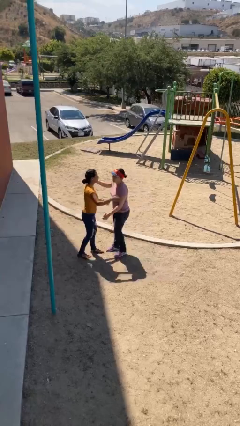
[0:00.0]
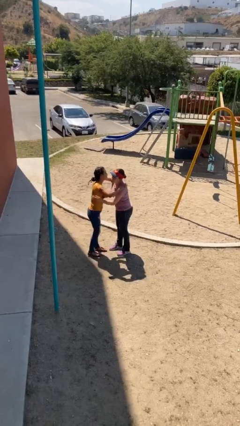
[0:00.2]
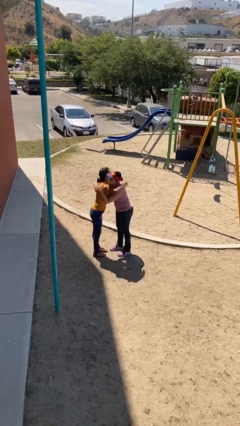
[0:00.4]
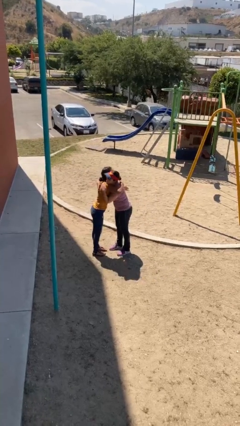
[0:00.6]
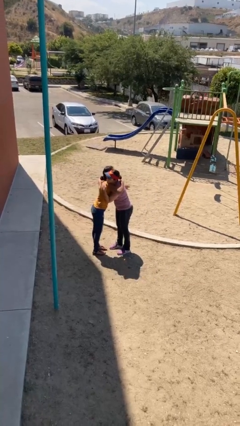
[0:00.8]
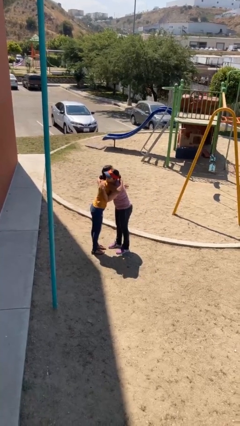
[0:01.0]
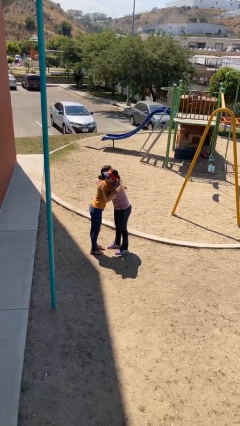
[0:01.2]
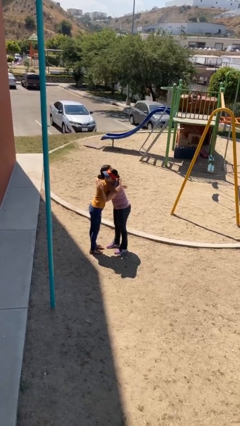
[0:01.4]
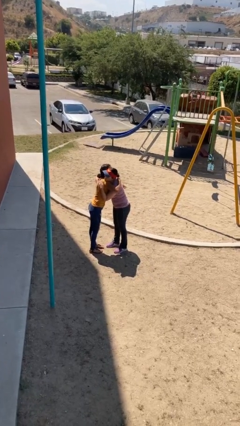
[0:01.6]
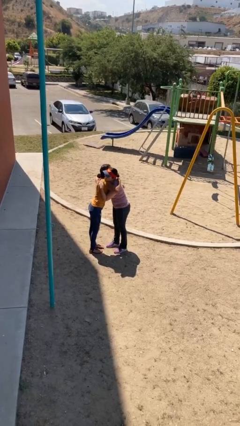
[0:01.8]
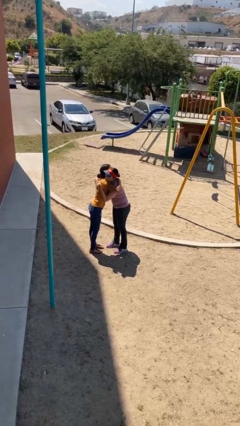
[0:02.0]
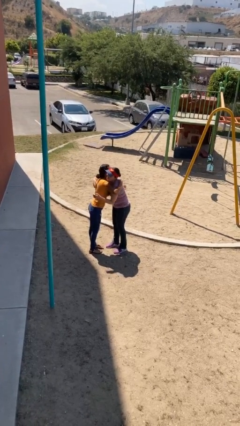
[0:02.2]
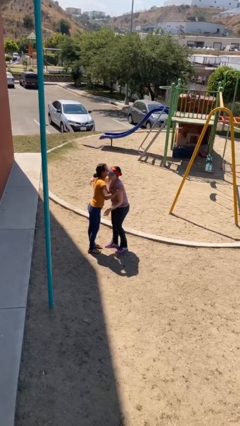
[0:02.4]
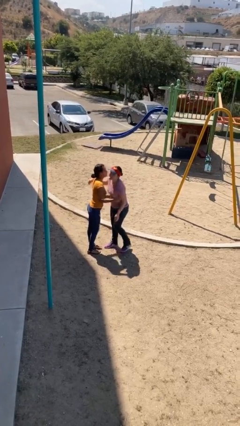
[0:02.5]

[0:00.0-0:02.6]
person embraces person

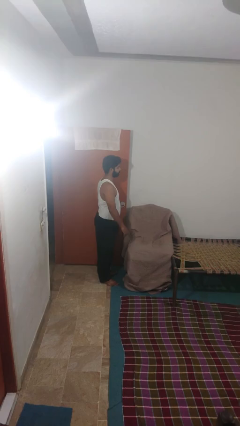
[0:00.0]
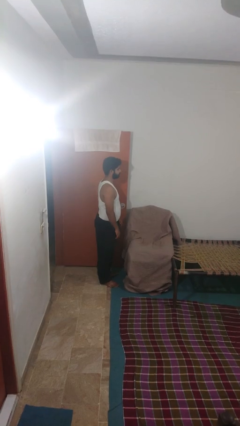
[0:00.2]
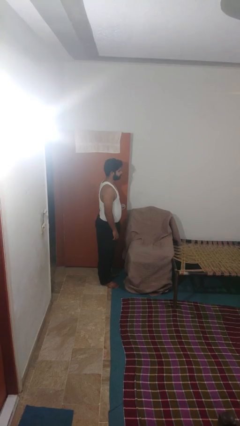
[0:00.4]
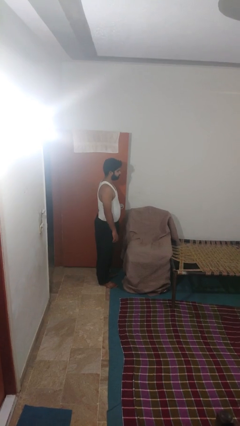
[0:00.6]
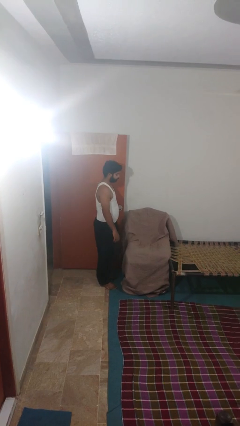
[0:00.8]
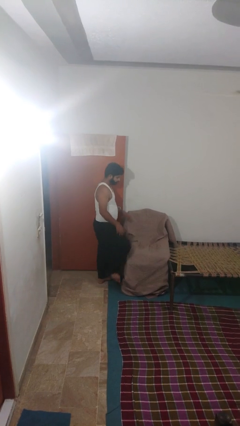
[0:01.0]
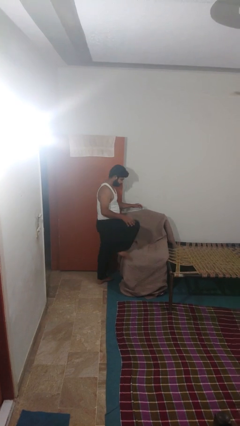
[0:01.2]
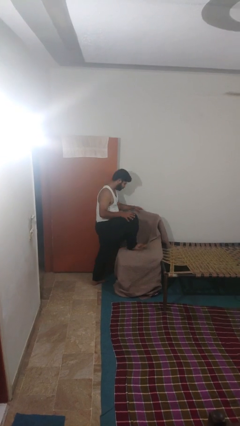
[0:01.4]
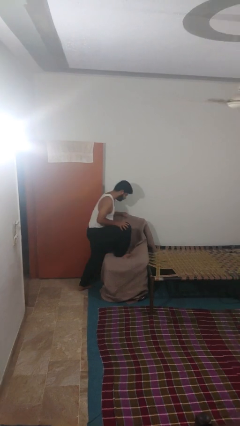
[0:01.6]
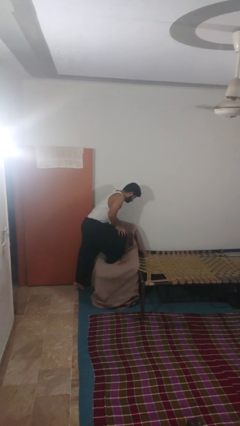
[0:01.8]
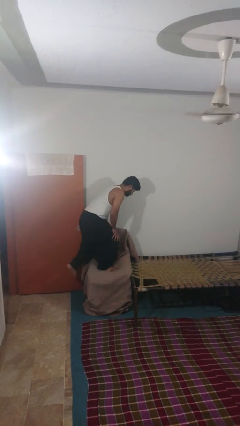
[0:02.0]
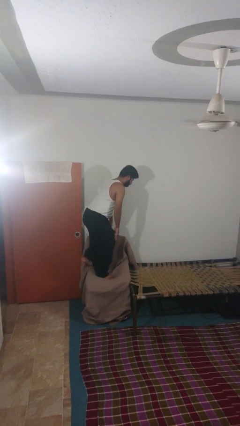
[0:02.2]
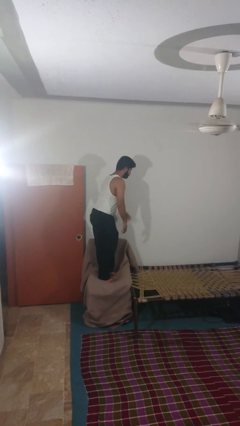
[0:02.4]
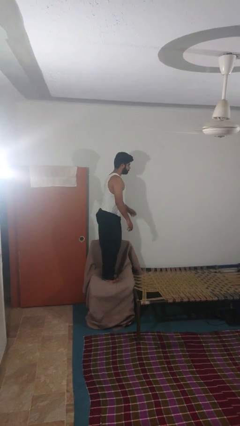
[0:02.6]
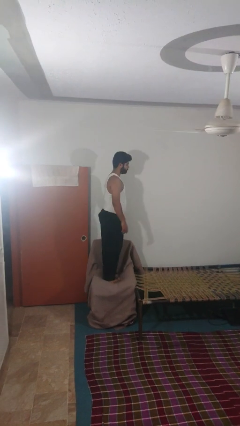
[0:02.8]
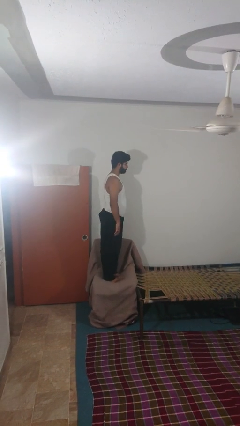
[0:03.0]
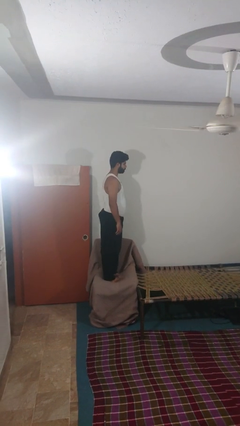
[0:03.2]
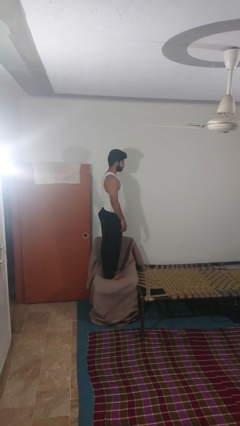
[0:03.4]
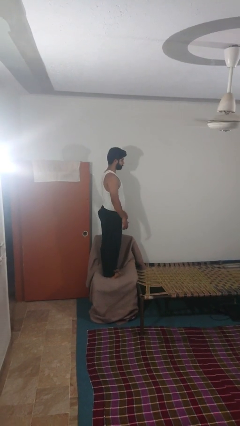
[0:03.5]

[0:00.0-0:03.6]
person climbs on couch

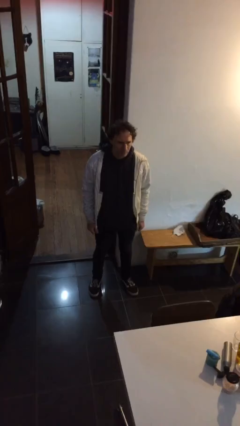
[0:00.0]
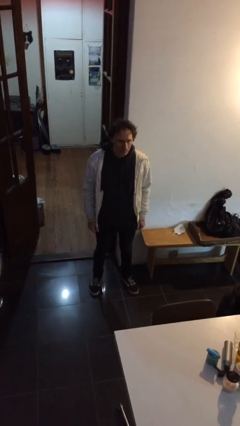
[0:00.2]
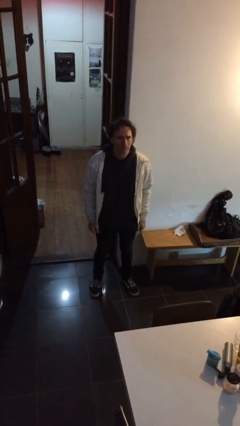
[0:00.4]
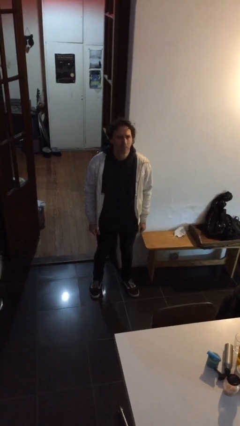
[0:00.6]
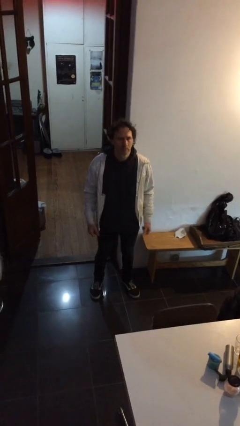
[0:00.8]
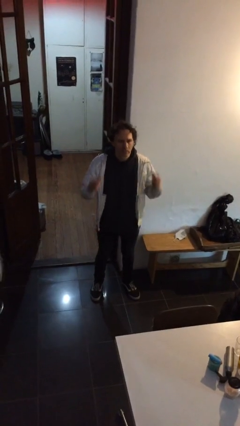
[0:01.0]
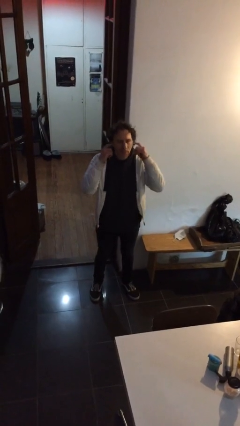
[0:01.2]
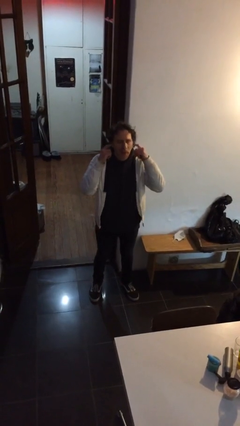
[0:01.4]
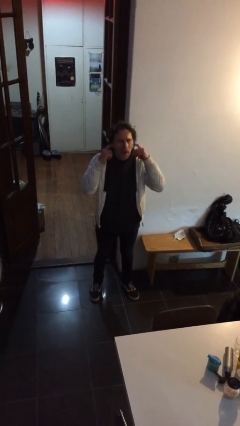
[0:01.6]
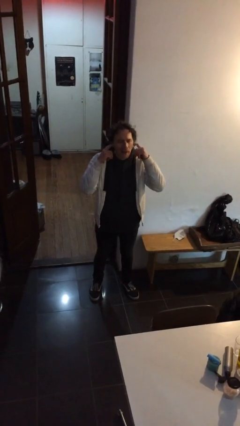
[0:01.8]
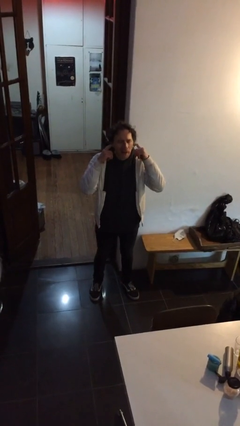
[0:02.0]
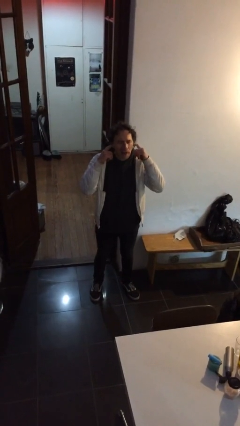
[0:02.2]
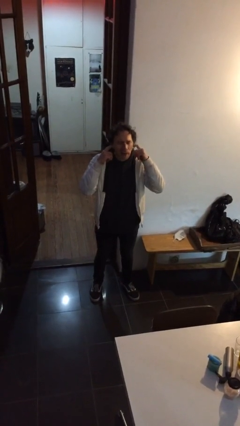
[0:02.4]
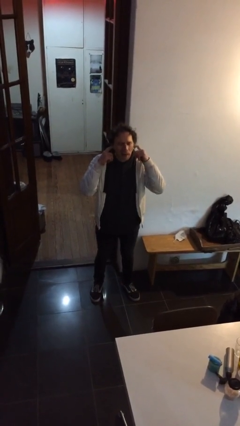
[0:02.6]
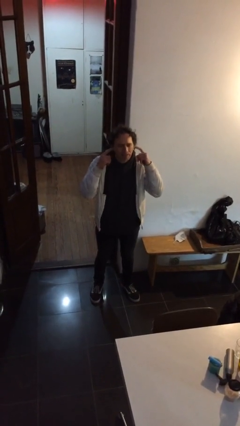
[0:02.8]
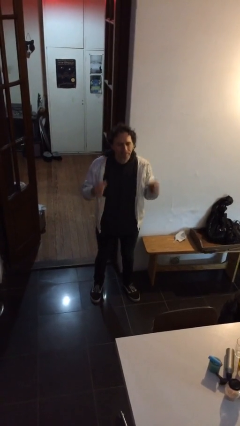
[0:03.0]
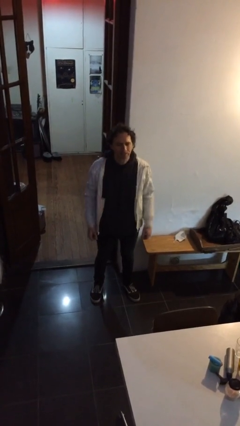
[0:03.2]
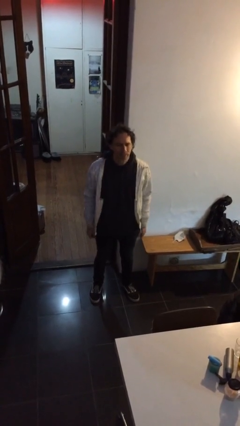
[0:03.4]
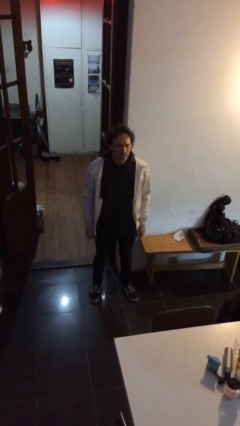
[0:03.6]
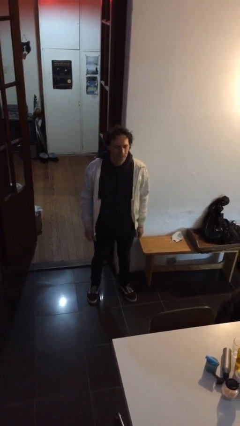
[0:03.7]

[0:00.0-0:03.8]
person puts fingers in ear

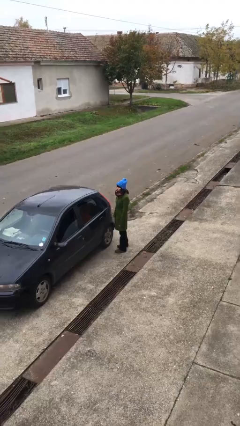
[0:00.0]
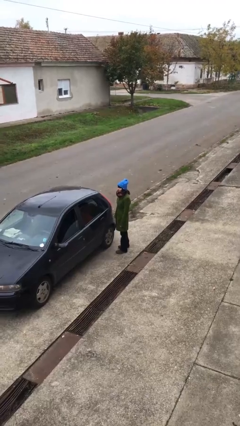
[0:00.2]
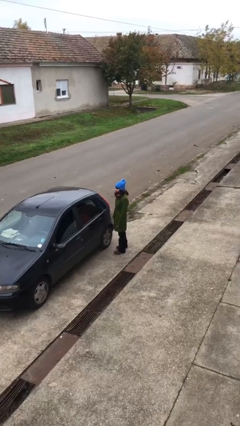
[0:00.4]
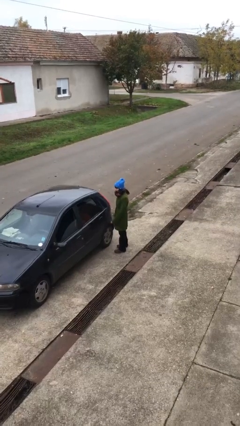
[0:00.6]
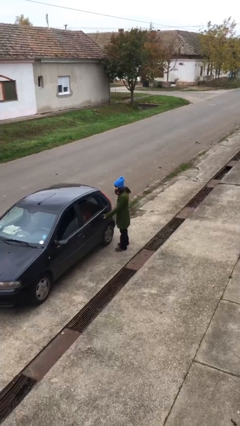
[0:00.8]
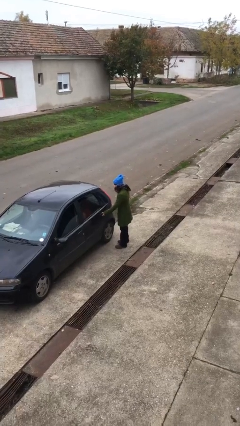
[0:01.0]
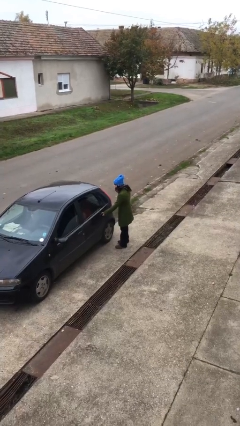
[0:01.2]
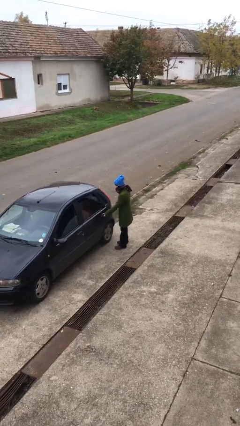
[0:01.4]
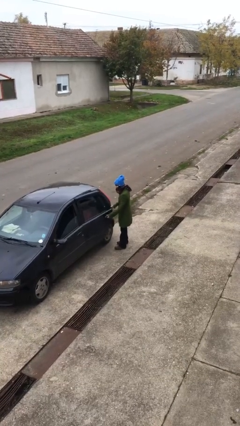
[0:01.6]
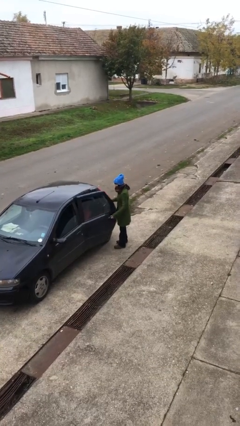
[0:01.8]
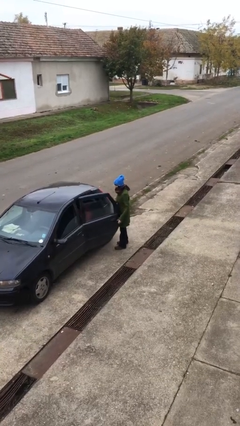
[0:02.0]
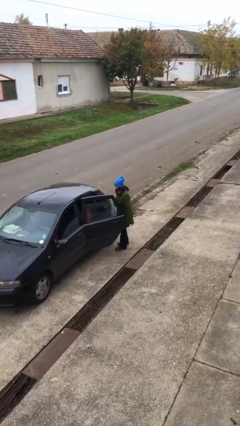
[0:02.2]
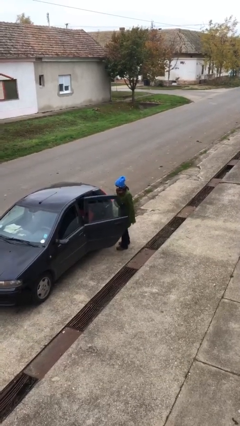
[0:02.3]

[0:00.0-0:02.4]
person opens car door

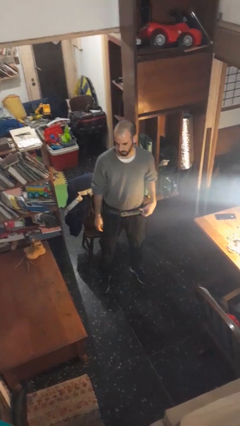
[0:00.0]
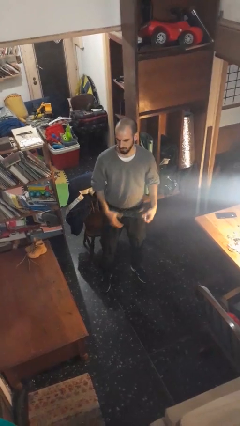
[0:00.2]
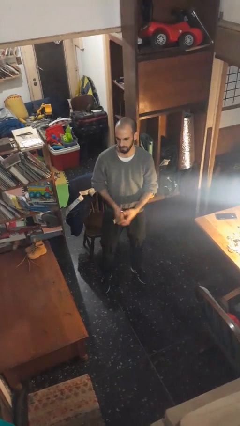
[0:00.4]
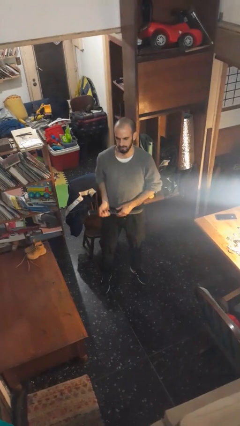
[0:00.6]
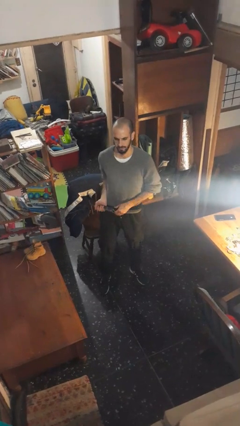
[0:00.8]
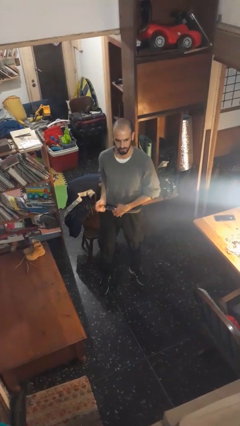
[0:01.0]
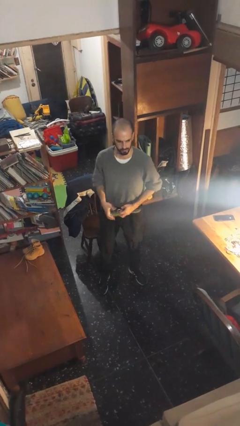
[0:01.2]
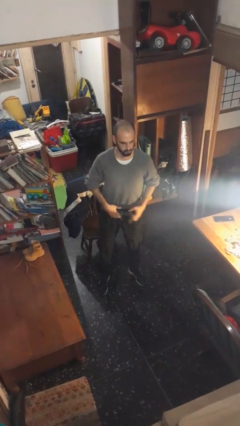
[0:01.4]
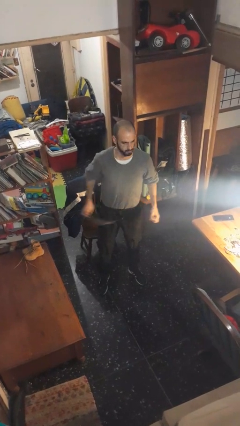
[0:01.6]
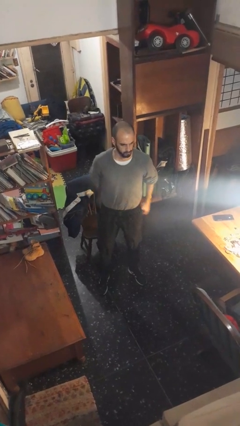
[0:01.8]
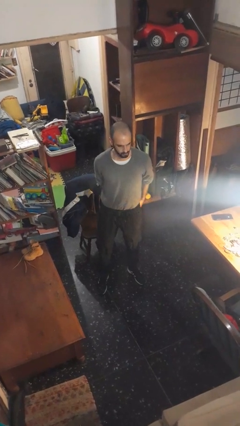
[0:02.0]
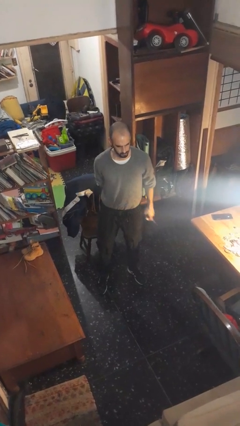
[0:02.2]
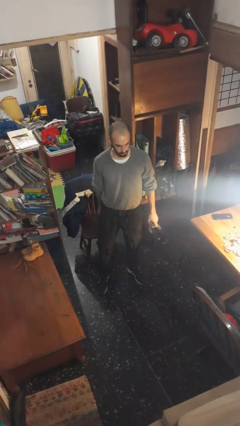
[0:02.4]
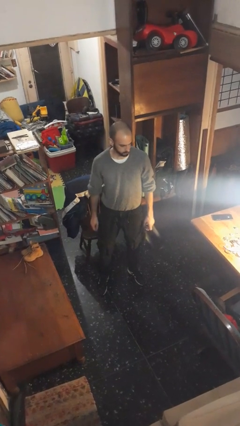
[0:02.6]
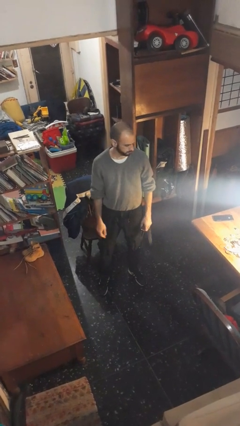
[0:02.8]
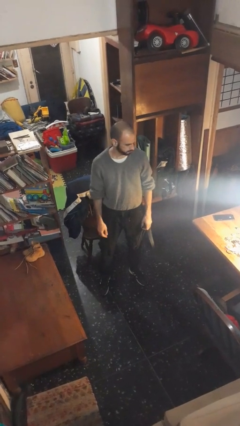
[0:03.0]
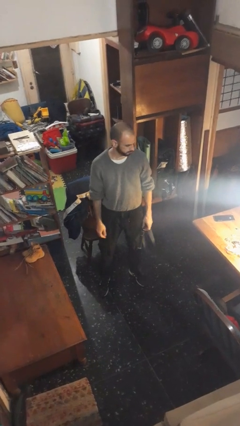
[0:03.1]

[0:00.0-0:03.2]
person takes off belt

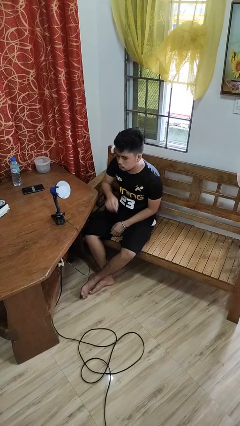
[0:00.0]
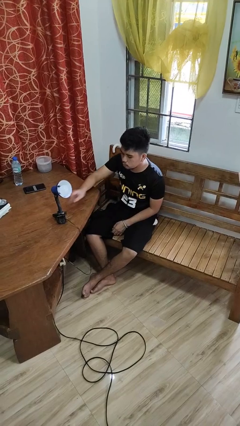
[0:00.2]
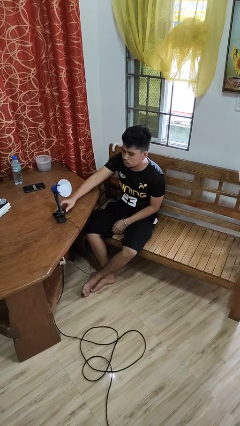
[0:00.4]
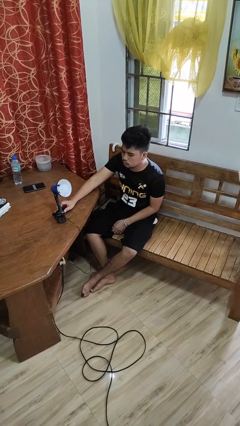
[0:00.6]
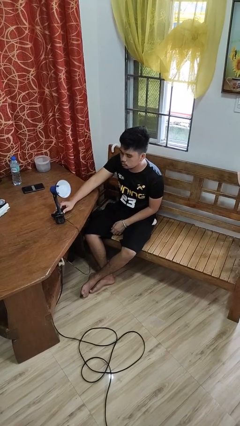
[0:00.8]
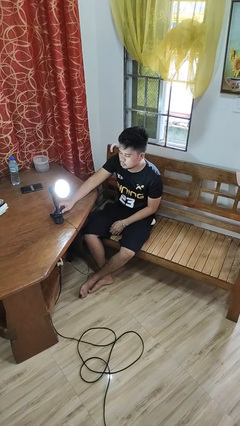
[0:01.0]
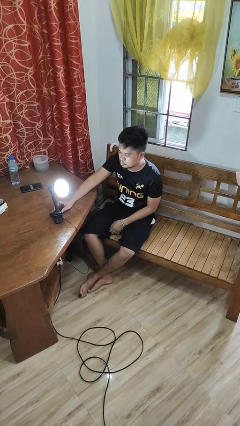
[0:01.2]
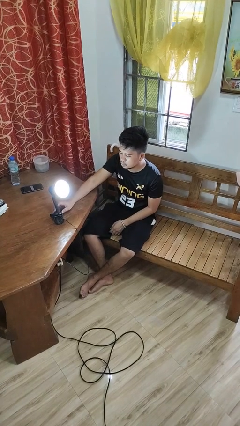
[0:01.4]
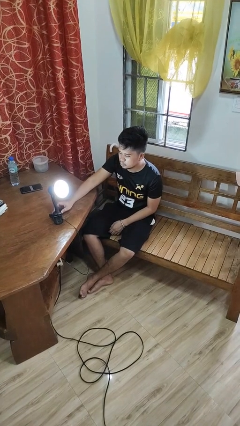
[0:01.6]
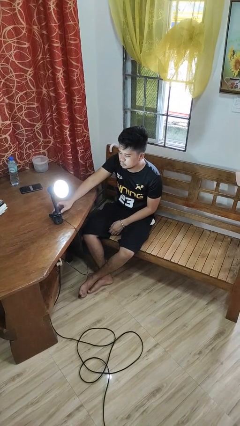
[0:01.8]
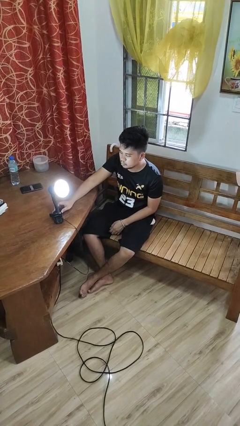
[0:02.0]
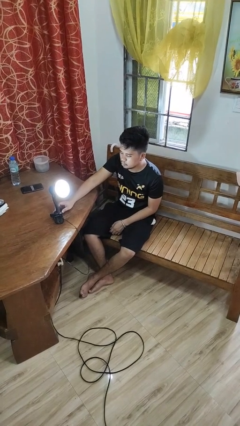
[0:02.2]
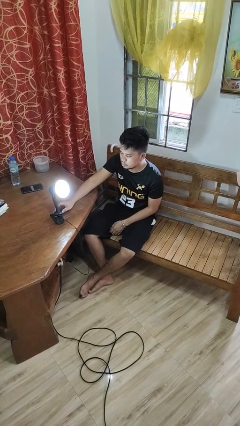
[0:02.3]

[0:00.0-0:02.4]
person turns on lamp
